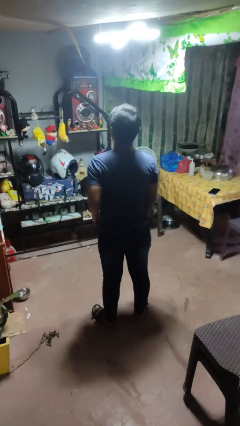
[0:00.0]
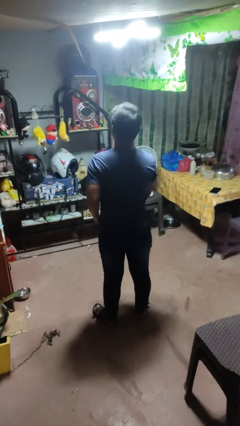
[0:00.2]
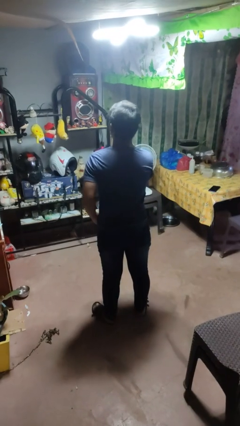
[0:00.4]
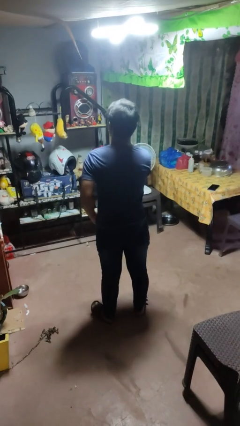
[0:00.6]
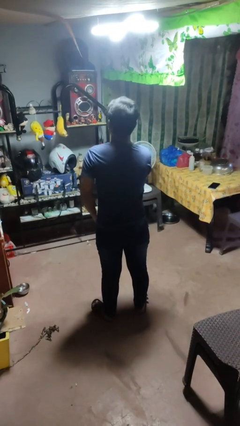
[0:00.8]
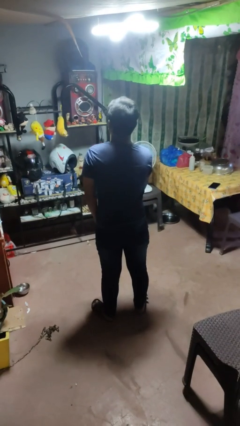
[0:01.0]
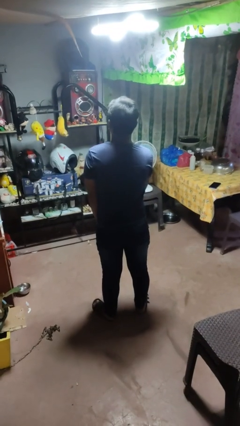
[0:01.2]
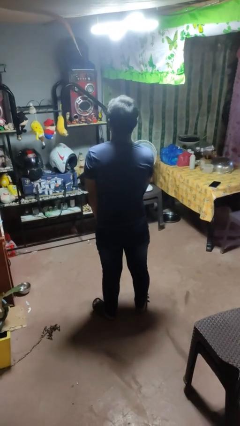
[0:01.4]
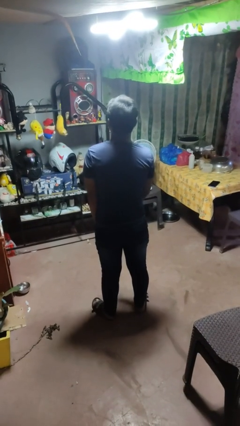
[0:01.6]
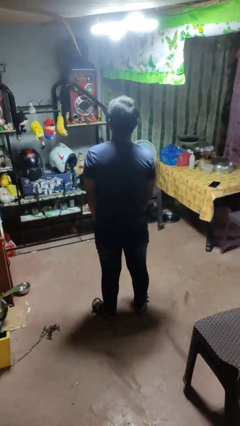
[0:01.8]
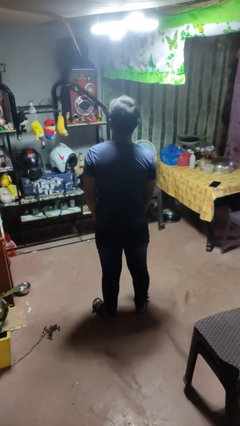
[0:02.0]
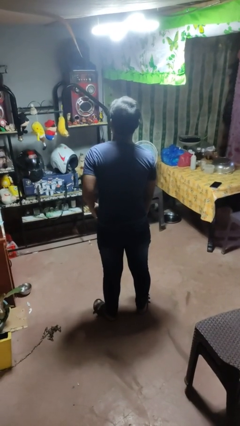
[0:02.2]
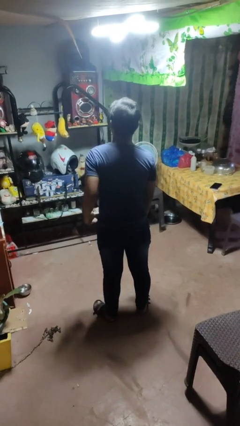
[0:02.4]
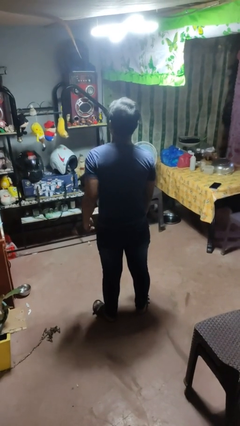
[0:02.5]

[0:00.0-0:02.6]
person puts hands in back pockets

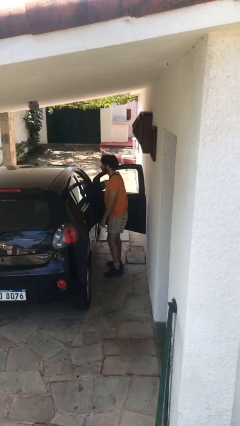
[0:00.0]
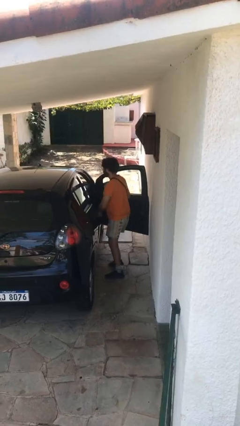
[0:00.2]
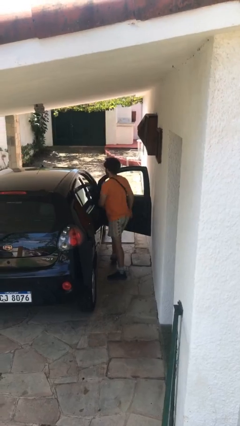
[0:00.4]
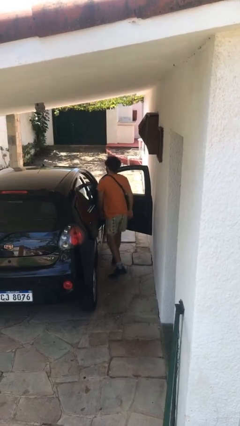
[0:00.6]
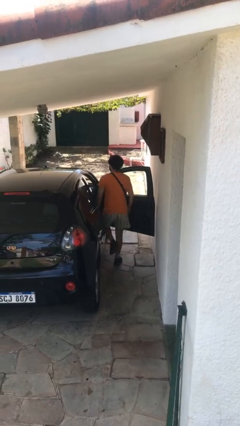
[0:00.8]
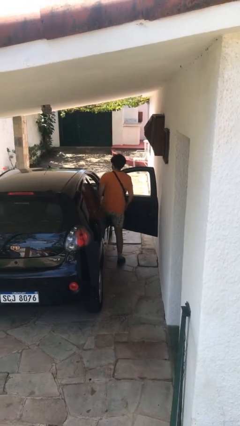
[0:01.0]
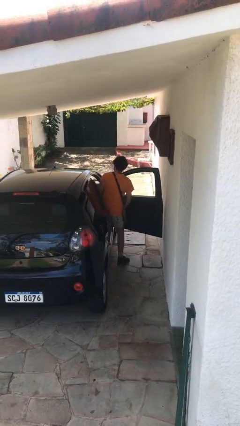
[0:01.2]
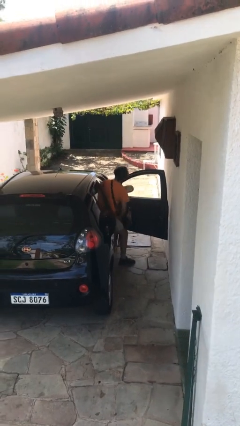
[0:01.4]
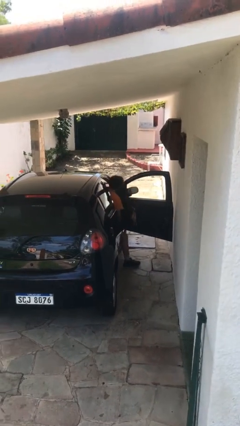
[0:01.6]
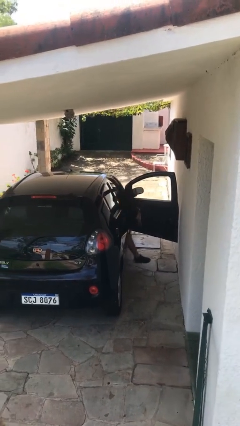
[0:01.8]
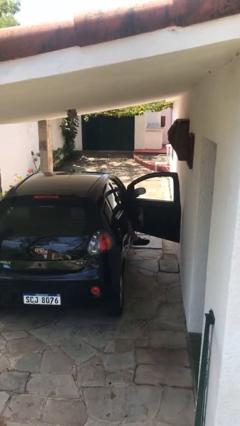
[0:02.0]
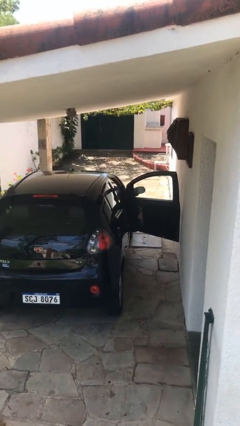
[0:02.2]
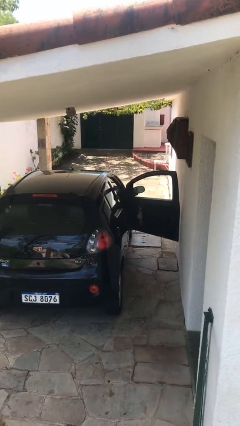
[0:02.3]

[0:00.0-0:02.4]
person enters car

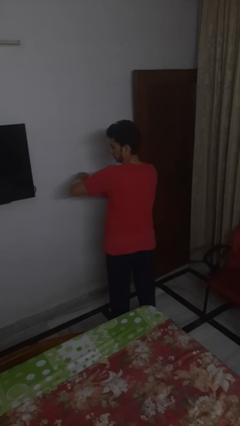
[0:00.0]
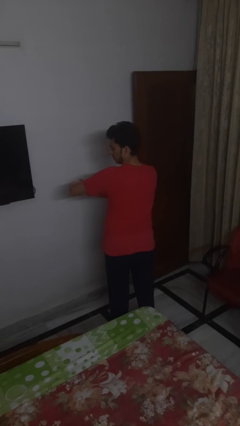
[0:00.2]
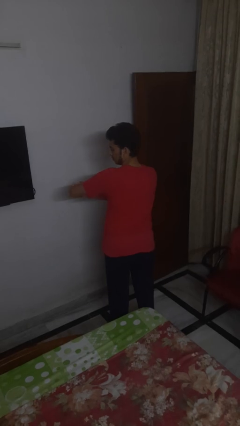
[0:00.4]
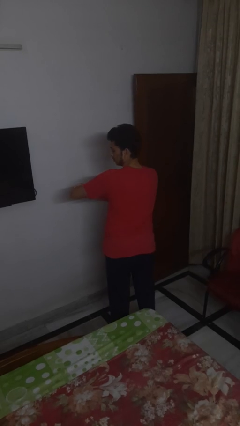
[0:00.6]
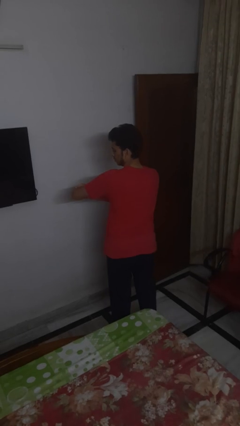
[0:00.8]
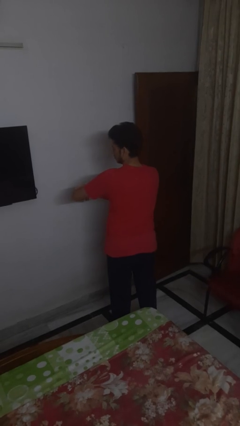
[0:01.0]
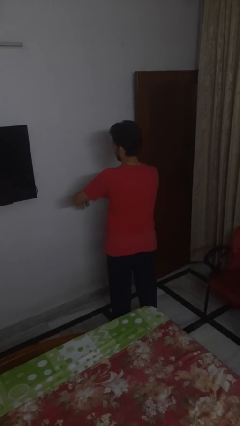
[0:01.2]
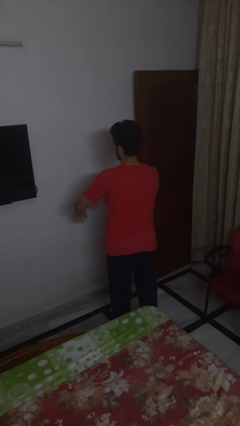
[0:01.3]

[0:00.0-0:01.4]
person swats bug

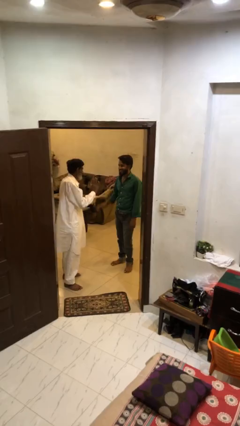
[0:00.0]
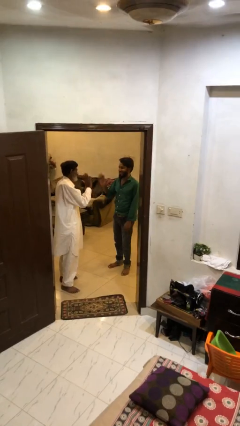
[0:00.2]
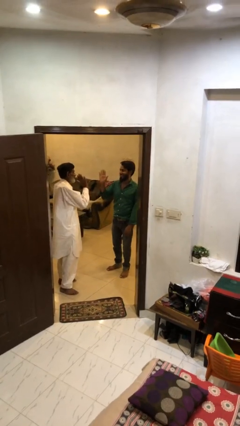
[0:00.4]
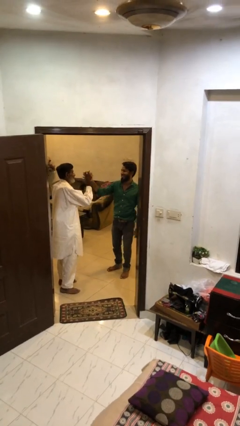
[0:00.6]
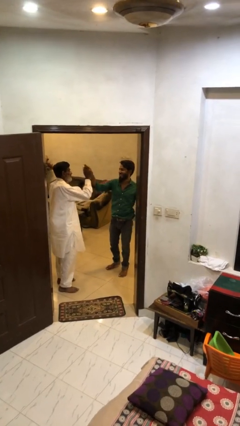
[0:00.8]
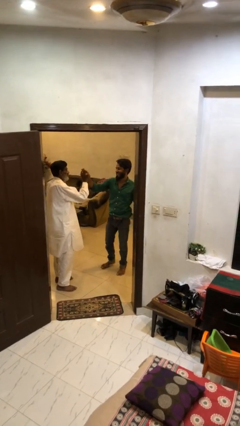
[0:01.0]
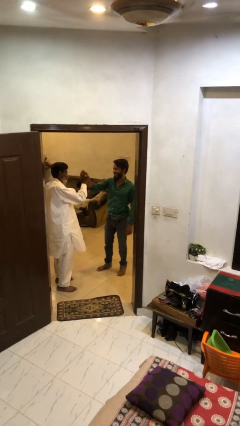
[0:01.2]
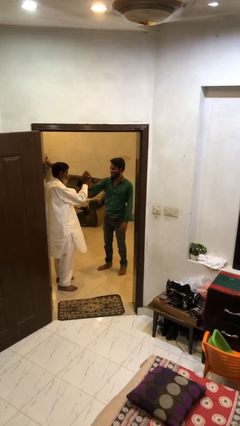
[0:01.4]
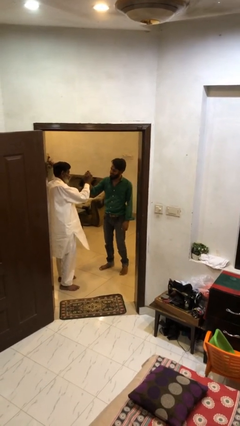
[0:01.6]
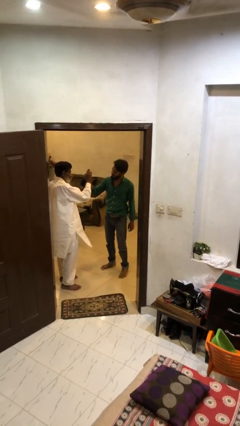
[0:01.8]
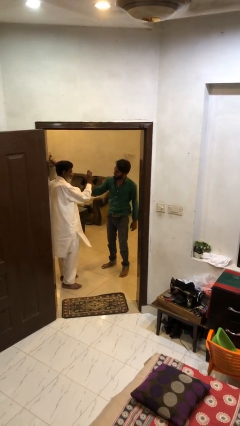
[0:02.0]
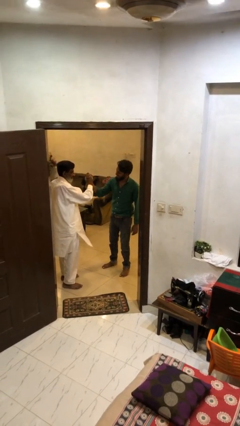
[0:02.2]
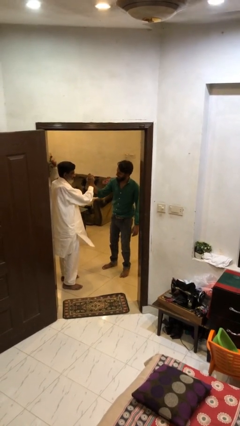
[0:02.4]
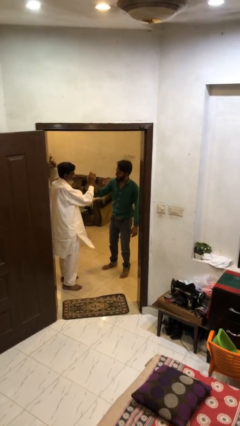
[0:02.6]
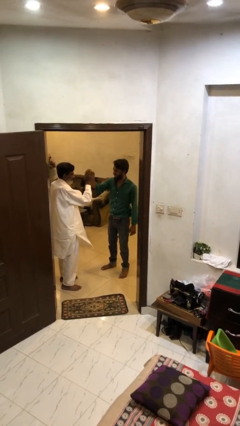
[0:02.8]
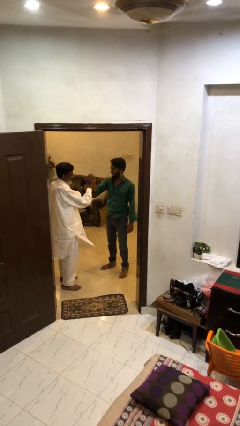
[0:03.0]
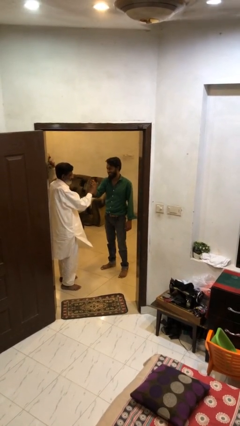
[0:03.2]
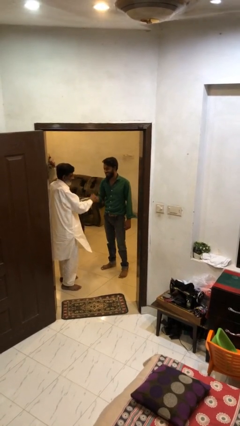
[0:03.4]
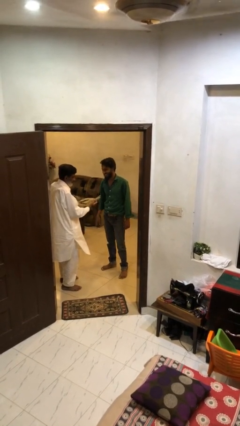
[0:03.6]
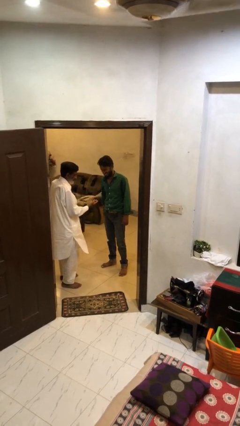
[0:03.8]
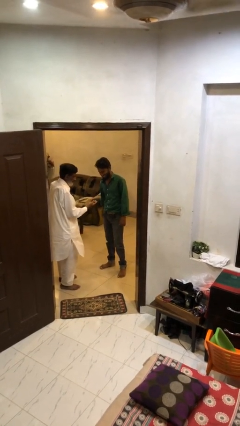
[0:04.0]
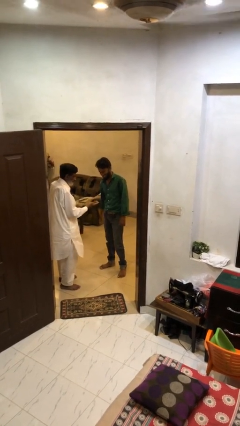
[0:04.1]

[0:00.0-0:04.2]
person highfives hand

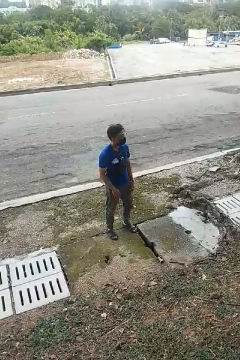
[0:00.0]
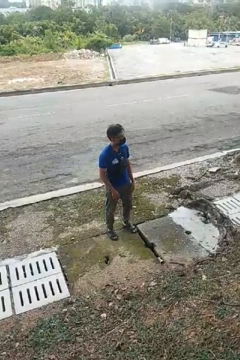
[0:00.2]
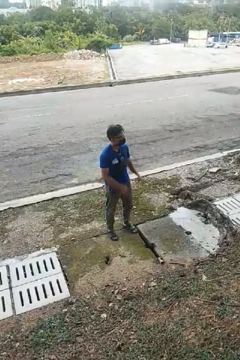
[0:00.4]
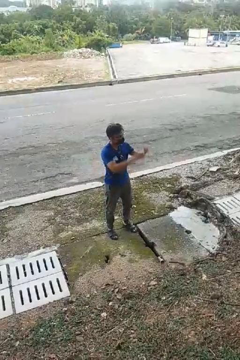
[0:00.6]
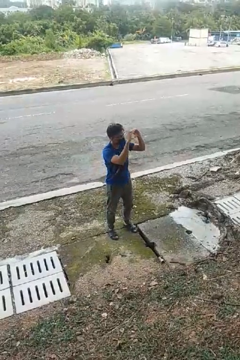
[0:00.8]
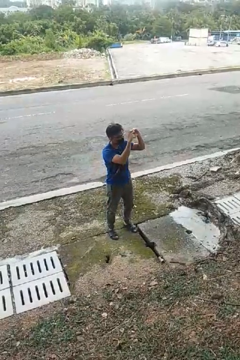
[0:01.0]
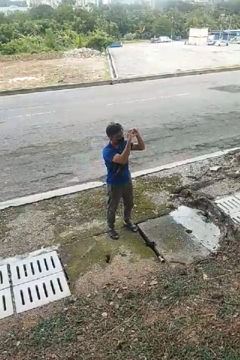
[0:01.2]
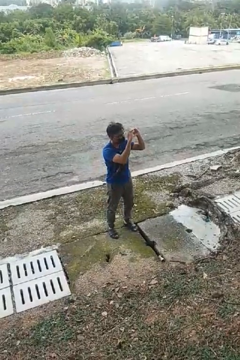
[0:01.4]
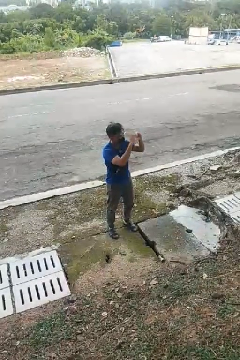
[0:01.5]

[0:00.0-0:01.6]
person gestures heart

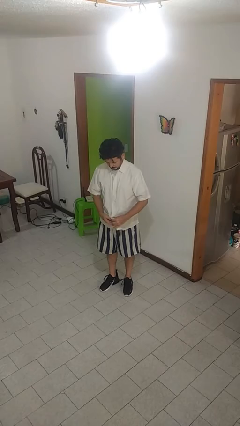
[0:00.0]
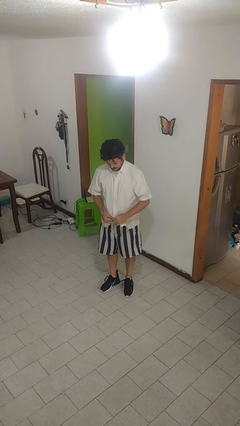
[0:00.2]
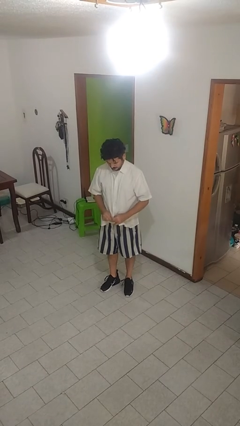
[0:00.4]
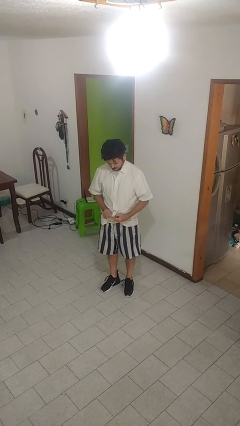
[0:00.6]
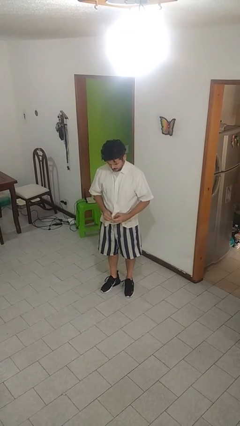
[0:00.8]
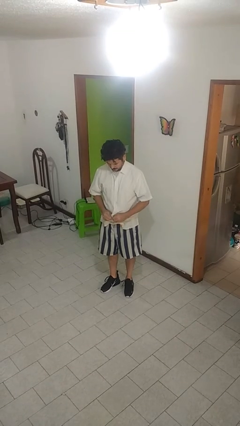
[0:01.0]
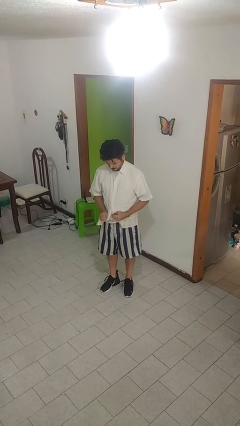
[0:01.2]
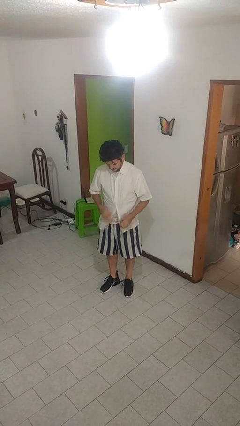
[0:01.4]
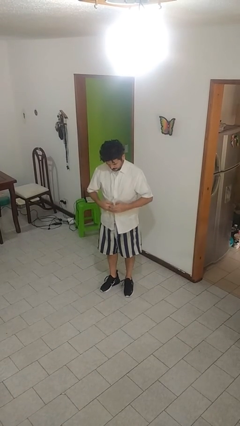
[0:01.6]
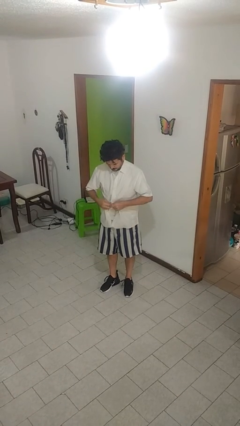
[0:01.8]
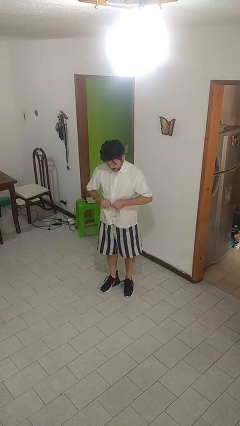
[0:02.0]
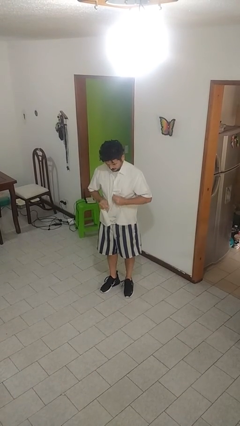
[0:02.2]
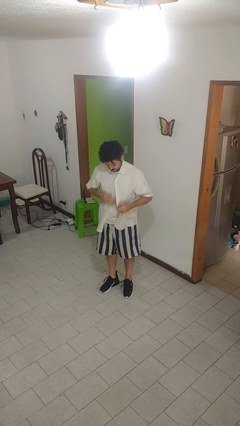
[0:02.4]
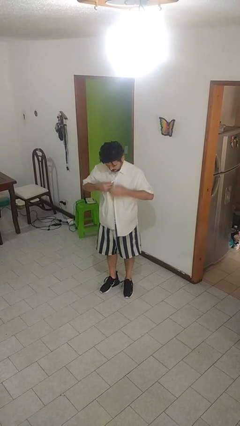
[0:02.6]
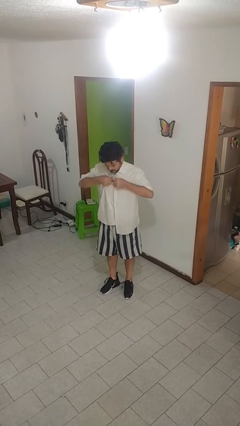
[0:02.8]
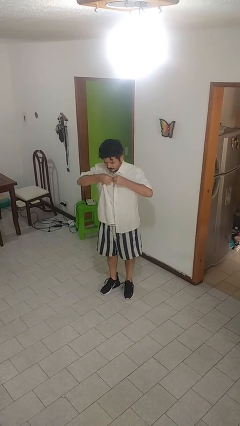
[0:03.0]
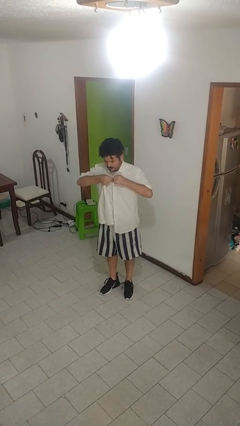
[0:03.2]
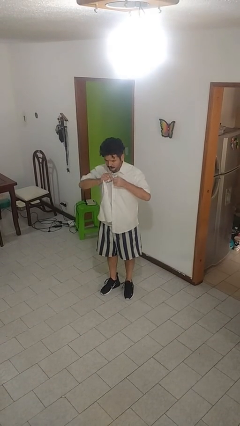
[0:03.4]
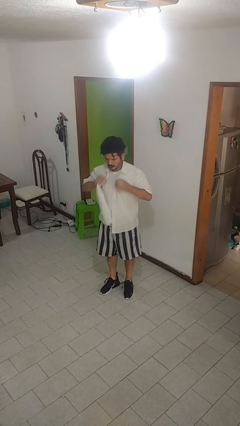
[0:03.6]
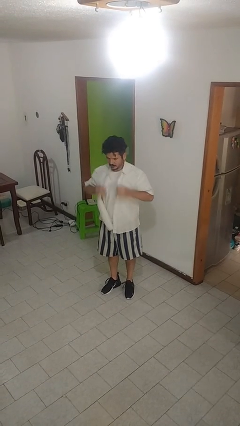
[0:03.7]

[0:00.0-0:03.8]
person unbuttons shirt

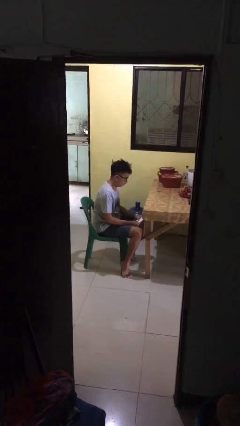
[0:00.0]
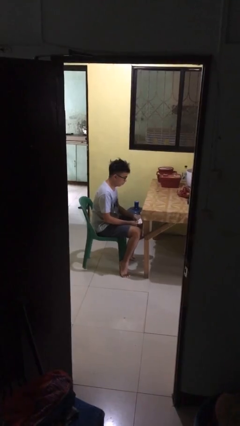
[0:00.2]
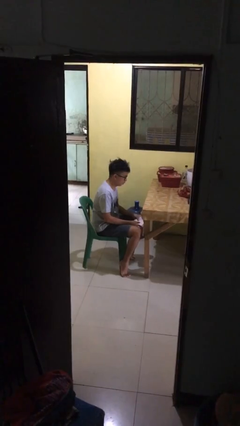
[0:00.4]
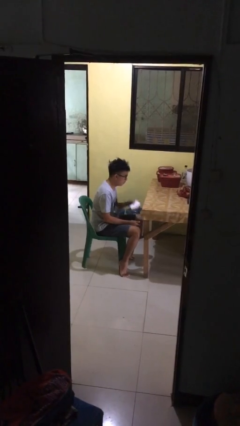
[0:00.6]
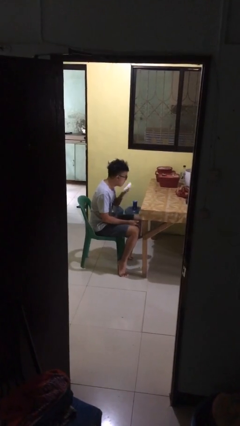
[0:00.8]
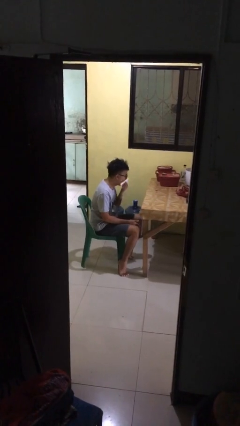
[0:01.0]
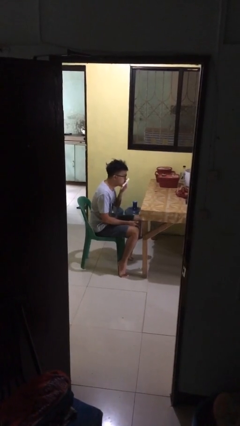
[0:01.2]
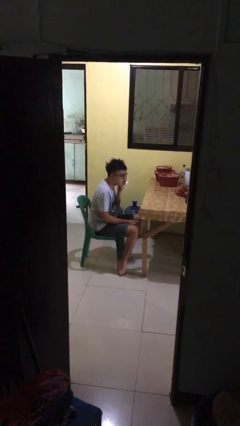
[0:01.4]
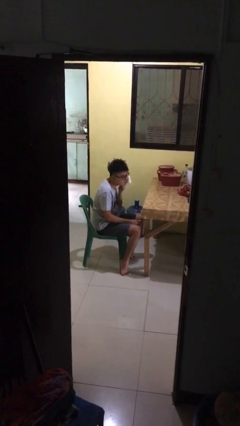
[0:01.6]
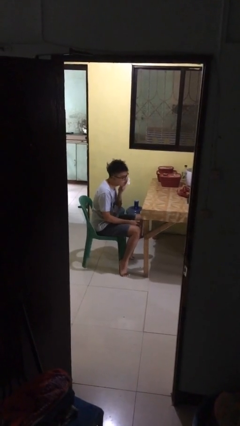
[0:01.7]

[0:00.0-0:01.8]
person wipes mouth with napkin
